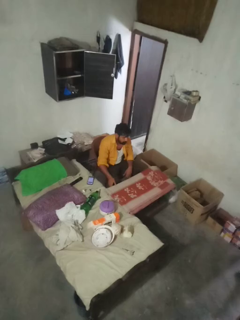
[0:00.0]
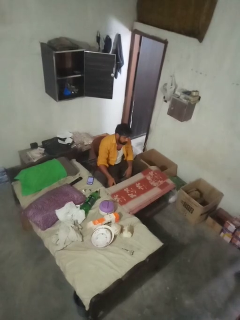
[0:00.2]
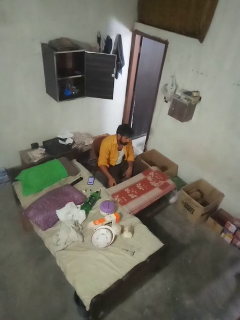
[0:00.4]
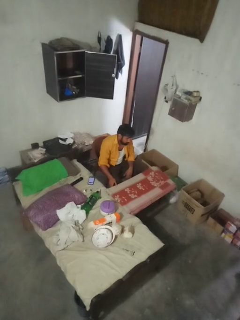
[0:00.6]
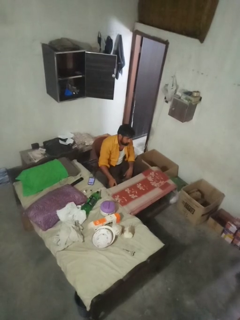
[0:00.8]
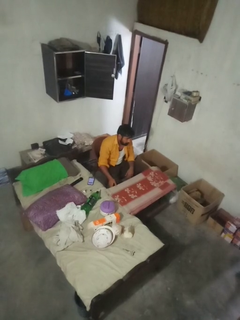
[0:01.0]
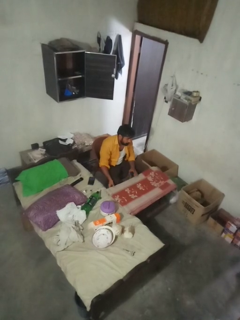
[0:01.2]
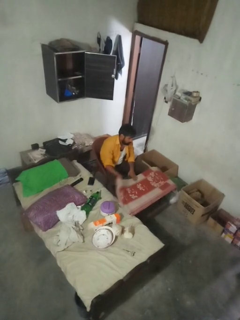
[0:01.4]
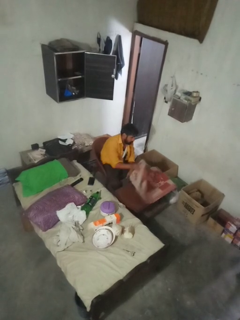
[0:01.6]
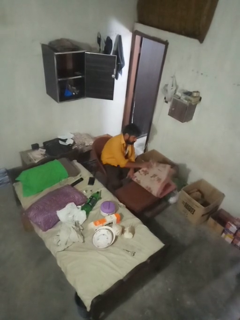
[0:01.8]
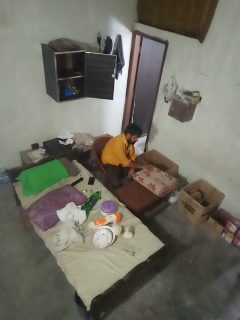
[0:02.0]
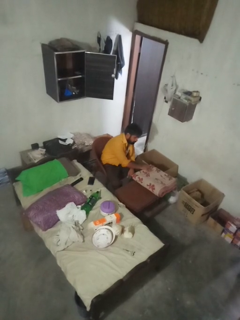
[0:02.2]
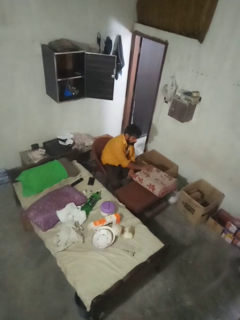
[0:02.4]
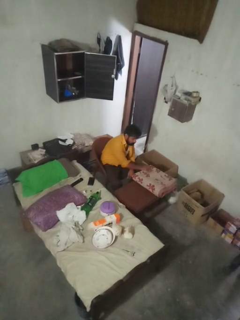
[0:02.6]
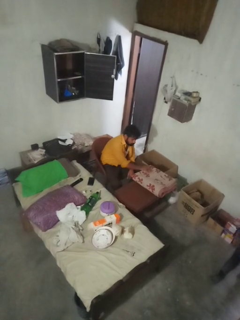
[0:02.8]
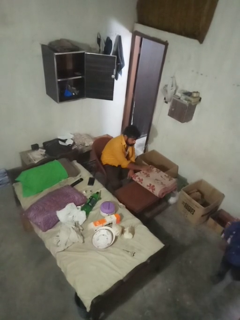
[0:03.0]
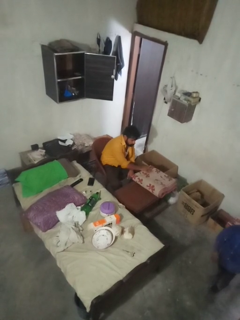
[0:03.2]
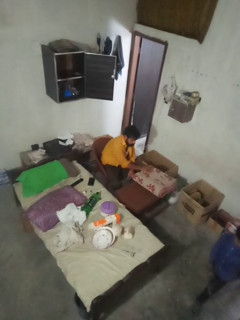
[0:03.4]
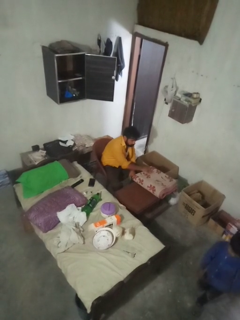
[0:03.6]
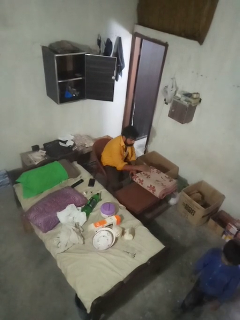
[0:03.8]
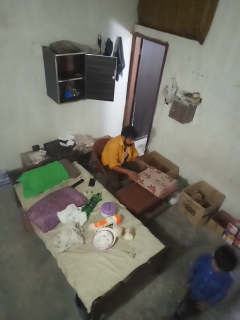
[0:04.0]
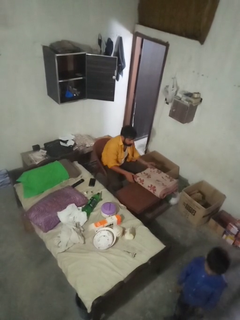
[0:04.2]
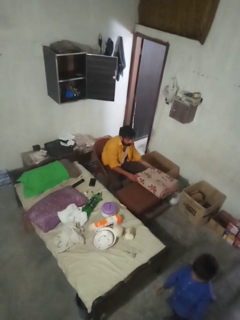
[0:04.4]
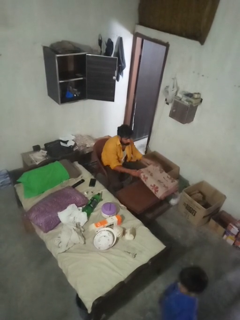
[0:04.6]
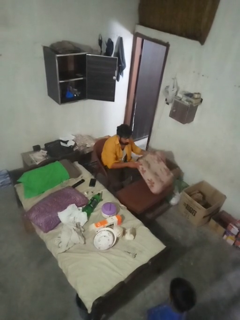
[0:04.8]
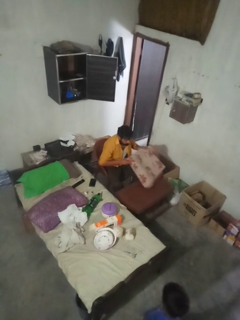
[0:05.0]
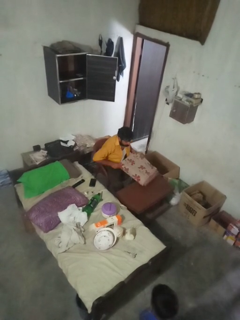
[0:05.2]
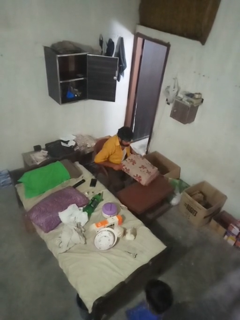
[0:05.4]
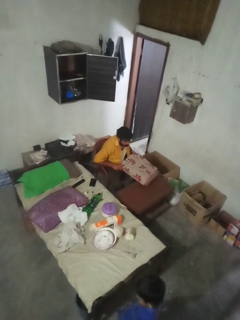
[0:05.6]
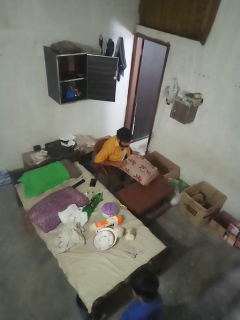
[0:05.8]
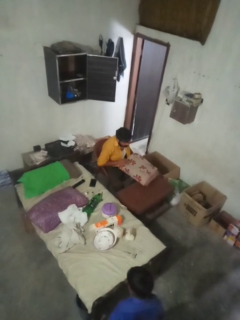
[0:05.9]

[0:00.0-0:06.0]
person folds tablecloth

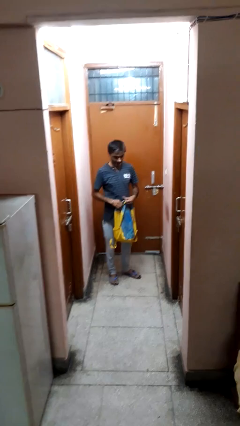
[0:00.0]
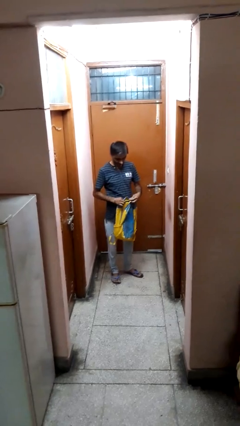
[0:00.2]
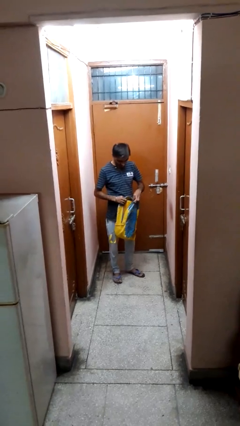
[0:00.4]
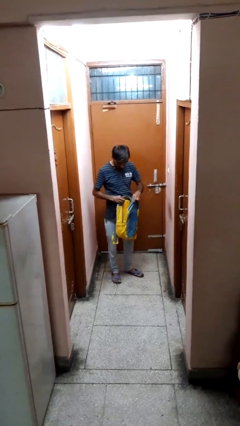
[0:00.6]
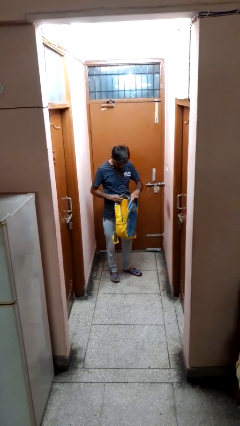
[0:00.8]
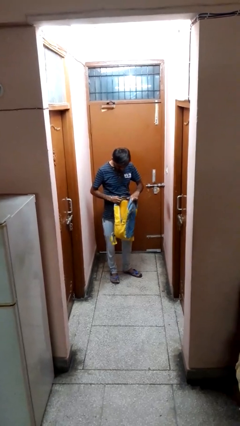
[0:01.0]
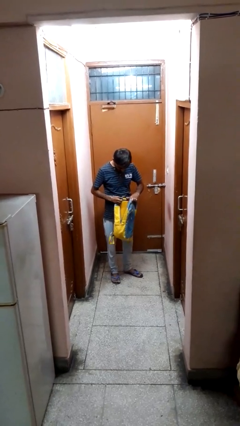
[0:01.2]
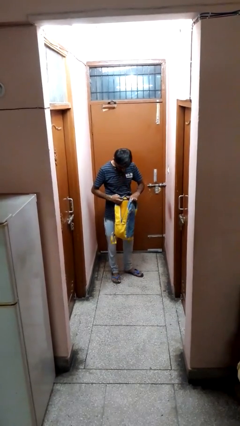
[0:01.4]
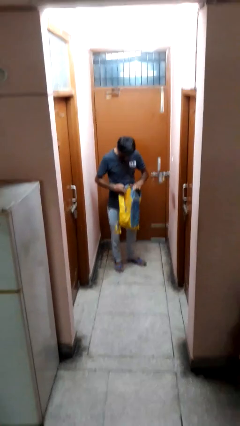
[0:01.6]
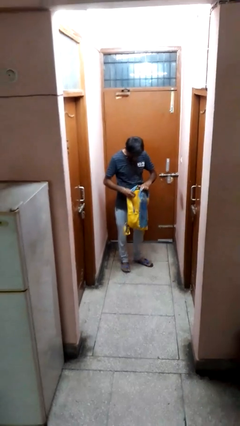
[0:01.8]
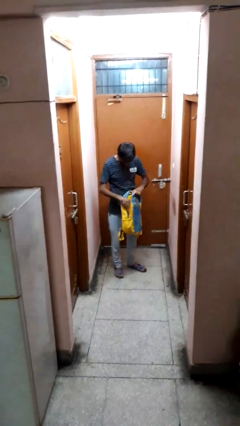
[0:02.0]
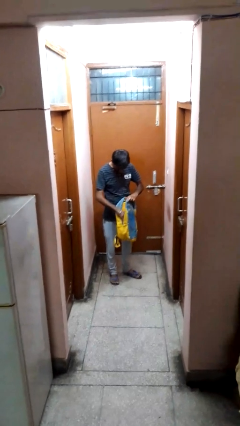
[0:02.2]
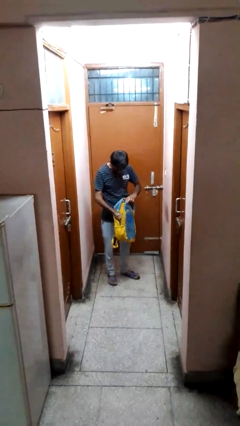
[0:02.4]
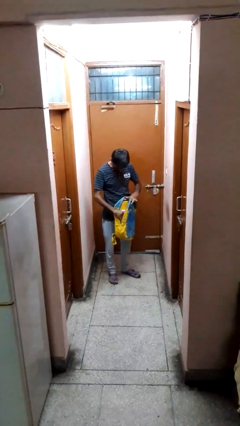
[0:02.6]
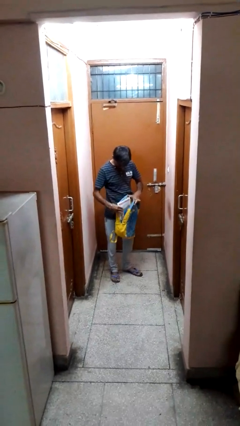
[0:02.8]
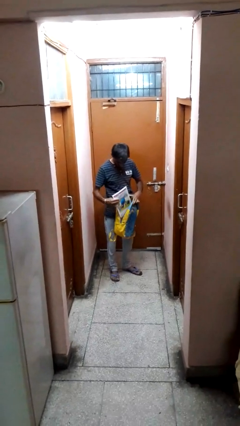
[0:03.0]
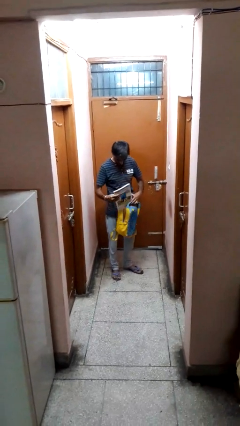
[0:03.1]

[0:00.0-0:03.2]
person searches in backpack

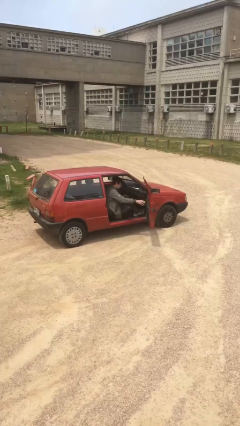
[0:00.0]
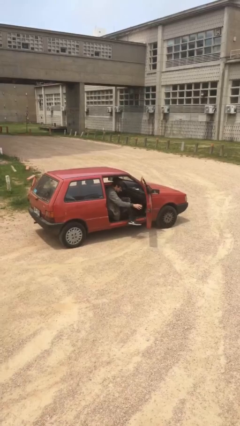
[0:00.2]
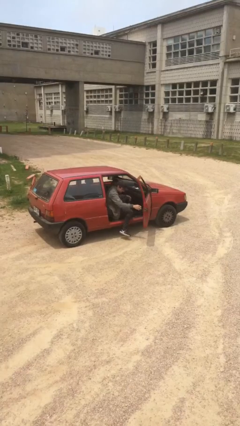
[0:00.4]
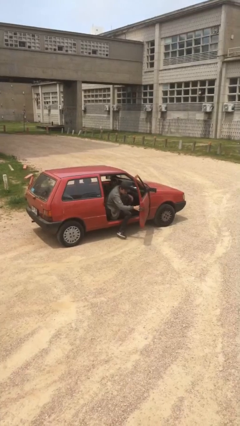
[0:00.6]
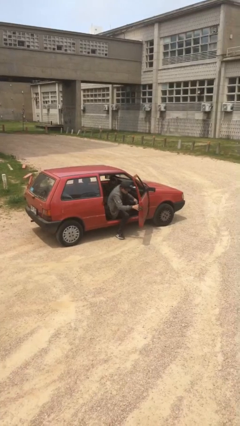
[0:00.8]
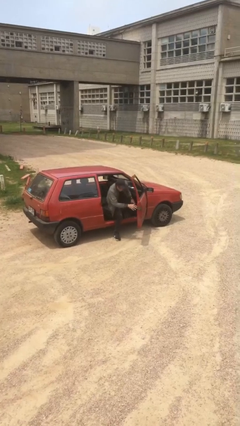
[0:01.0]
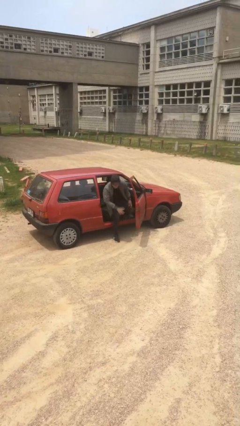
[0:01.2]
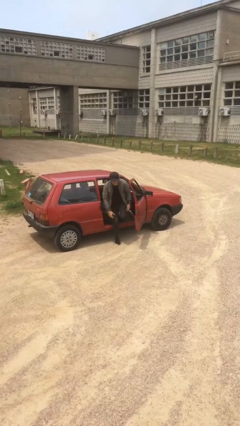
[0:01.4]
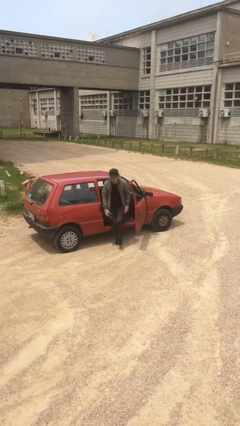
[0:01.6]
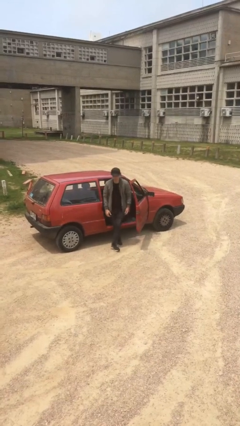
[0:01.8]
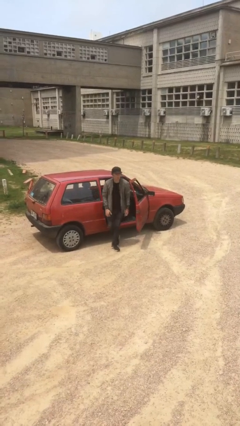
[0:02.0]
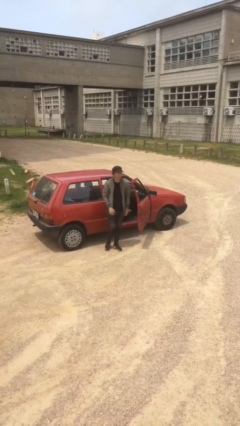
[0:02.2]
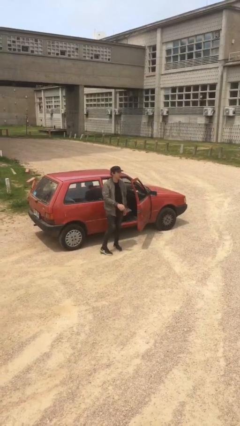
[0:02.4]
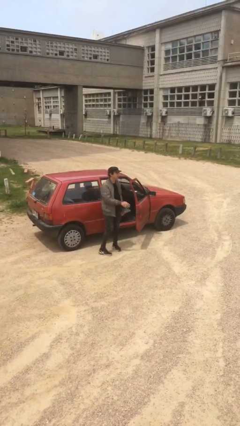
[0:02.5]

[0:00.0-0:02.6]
person exits car

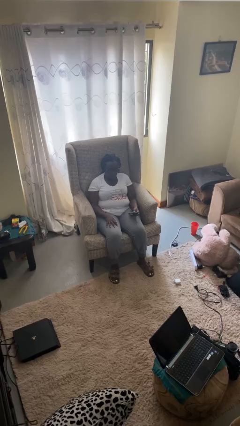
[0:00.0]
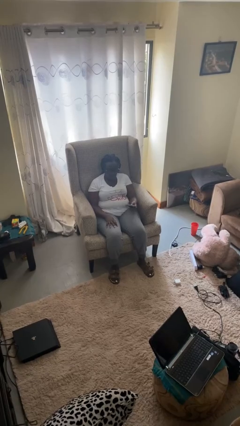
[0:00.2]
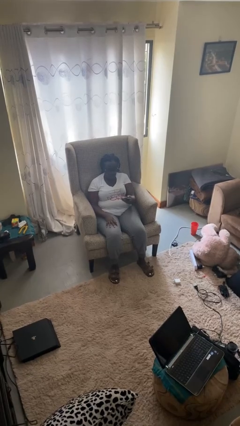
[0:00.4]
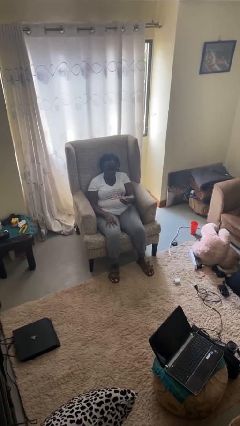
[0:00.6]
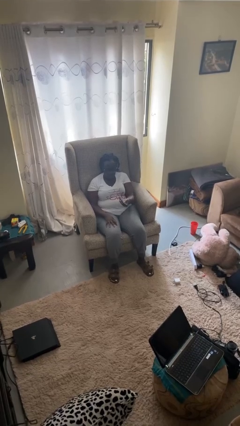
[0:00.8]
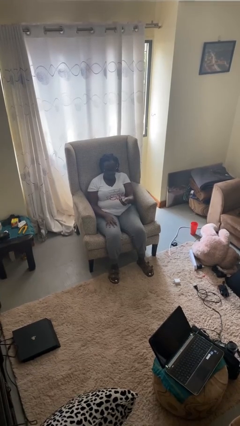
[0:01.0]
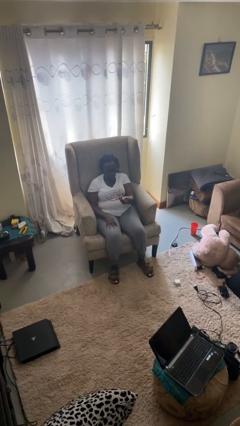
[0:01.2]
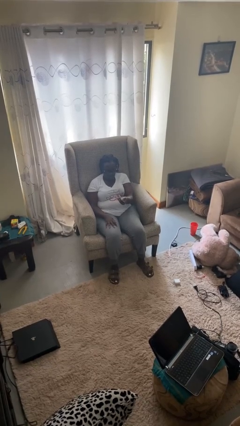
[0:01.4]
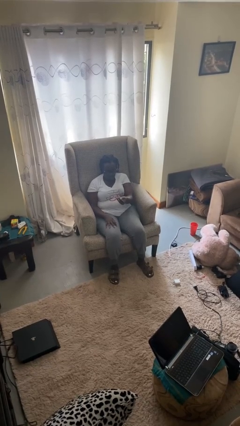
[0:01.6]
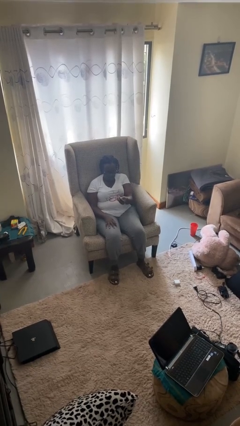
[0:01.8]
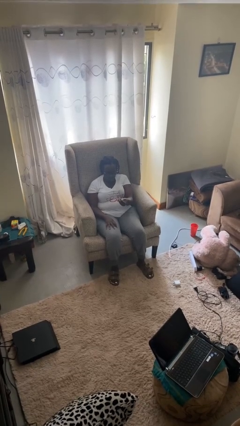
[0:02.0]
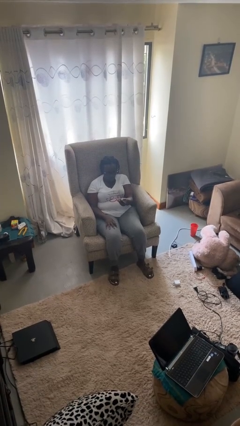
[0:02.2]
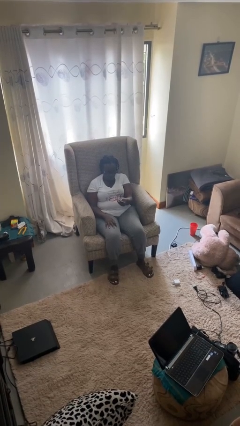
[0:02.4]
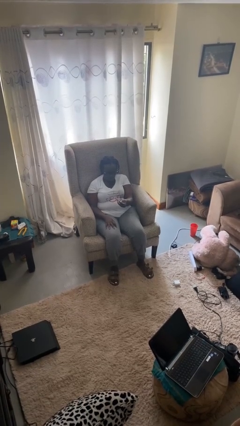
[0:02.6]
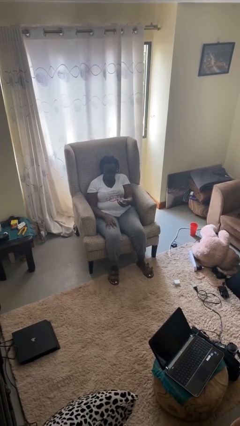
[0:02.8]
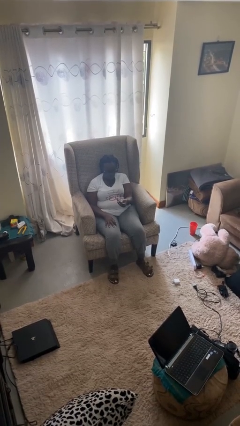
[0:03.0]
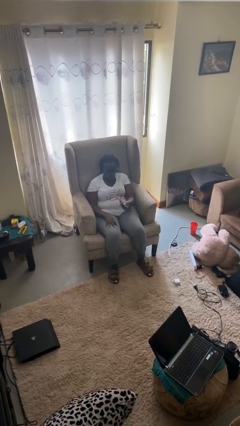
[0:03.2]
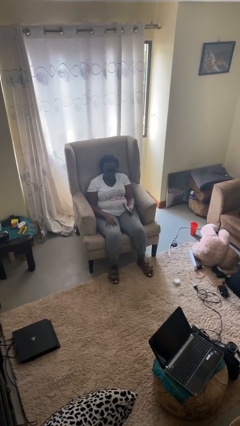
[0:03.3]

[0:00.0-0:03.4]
person uses television remote

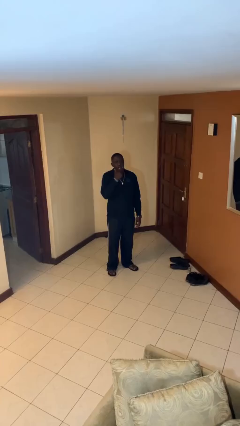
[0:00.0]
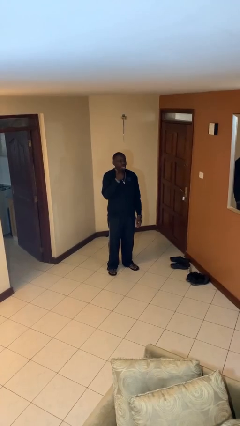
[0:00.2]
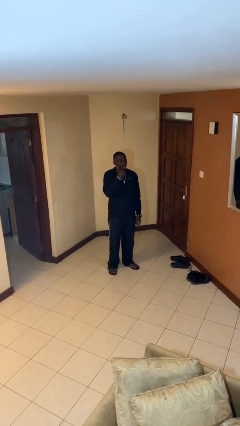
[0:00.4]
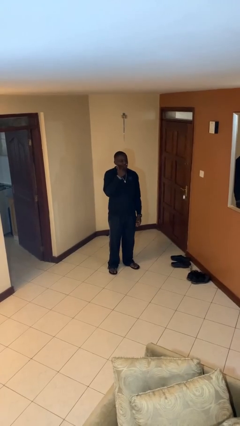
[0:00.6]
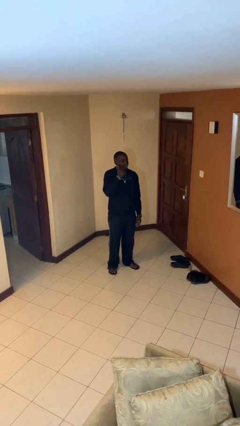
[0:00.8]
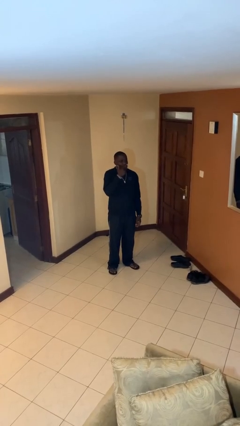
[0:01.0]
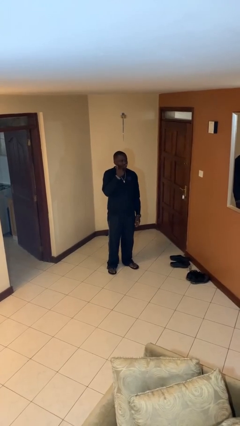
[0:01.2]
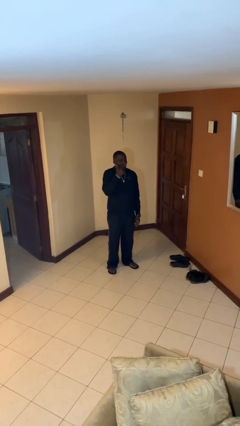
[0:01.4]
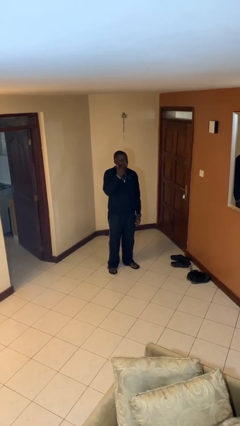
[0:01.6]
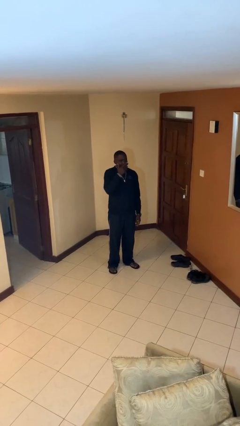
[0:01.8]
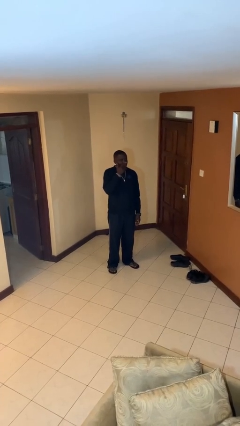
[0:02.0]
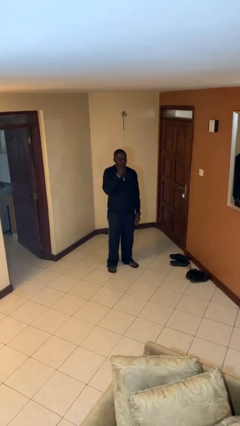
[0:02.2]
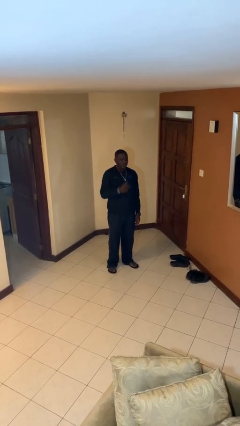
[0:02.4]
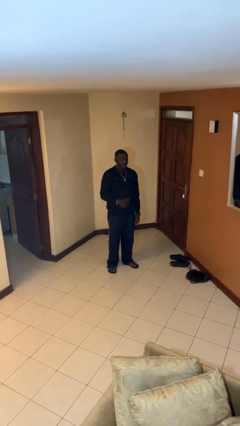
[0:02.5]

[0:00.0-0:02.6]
person licks fingers

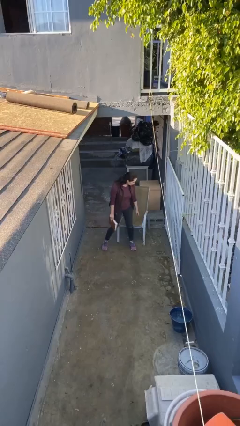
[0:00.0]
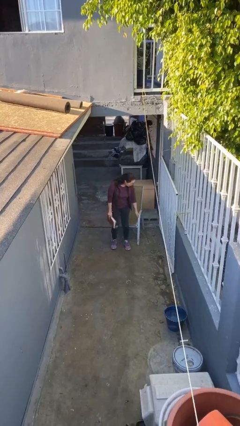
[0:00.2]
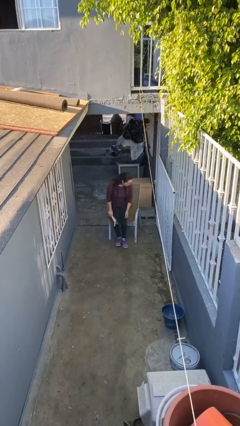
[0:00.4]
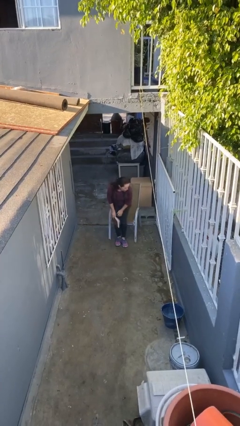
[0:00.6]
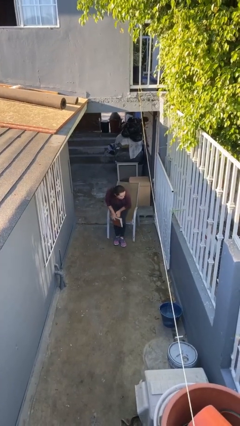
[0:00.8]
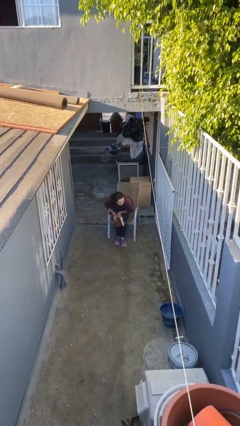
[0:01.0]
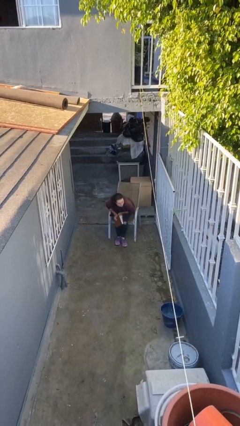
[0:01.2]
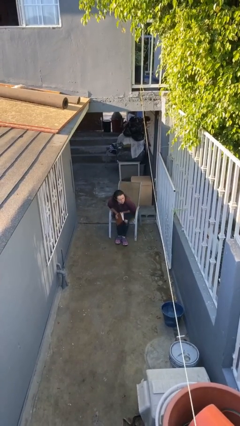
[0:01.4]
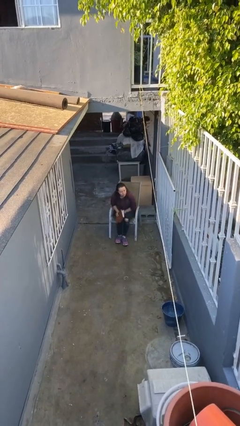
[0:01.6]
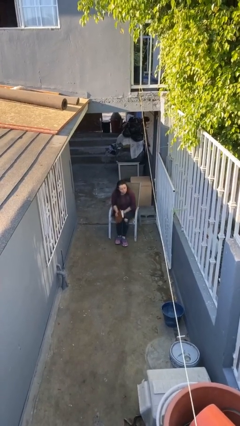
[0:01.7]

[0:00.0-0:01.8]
person sits down
